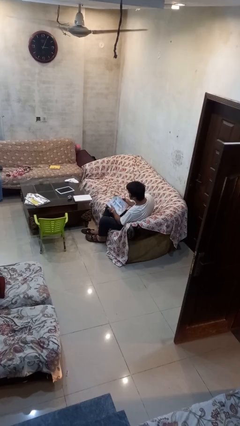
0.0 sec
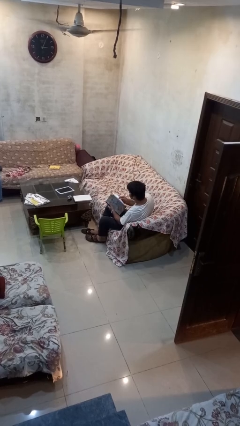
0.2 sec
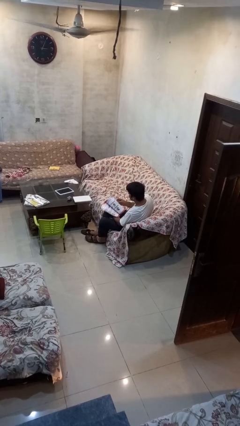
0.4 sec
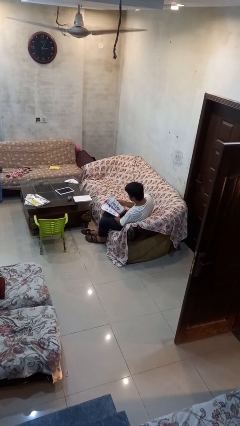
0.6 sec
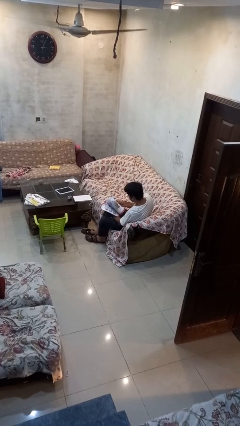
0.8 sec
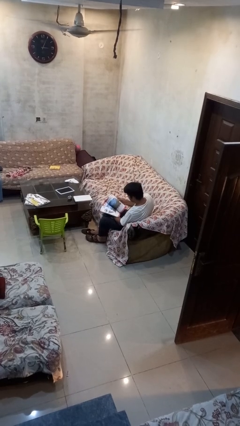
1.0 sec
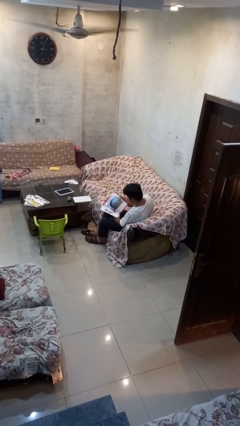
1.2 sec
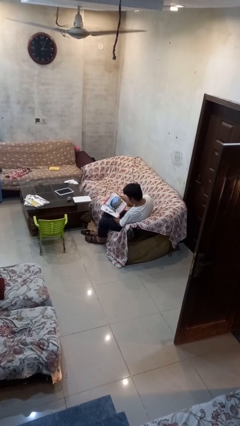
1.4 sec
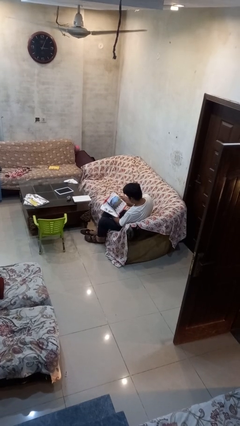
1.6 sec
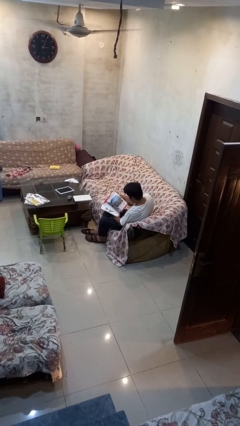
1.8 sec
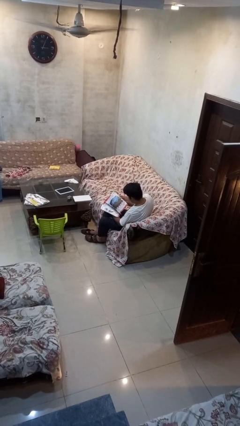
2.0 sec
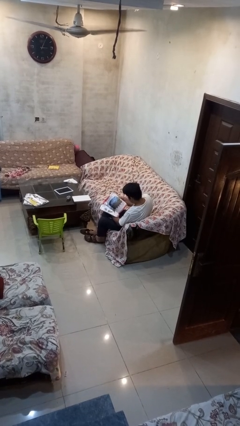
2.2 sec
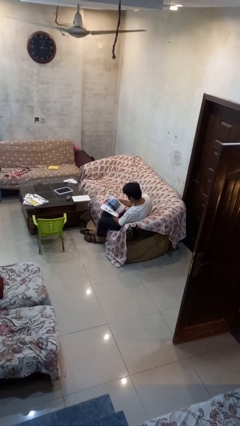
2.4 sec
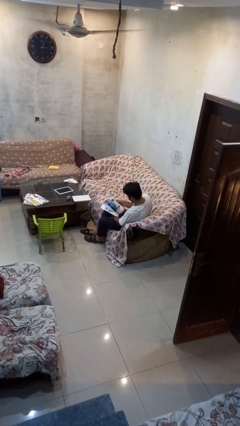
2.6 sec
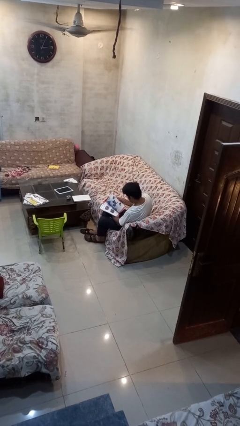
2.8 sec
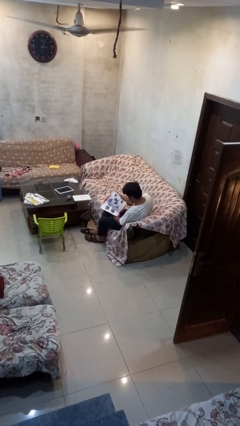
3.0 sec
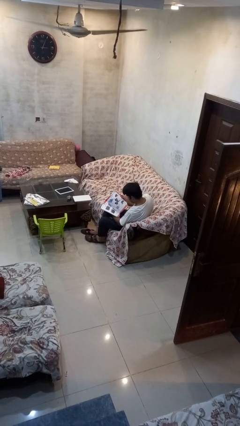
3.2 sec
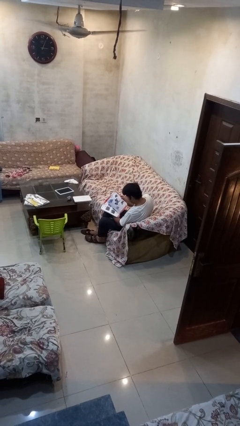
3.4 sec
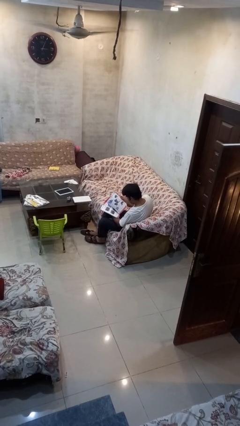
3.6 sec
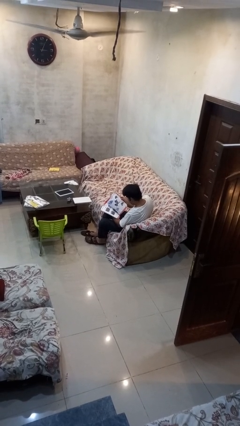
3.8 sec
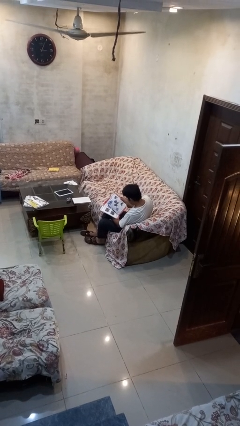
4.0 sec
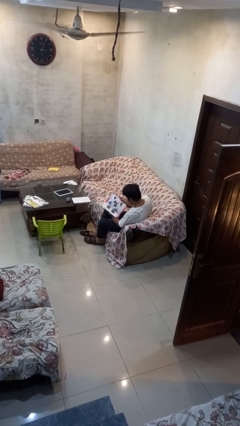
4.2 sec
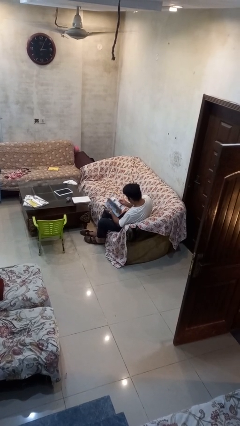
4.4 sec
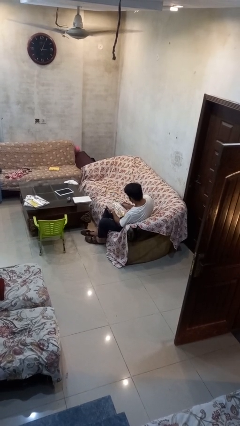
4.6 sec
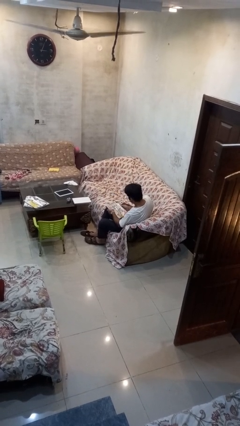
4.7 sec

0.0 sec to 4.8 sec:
person reads book

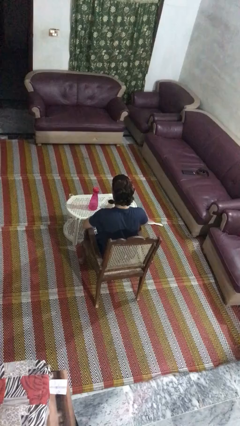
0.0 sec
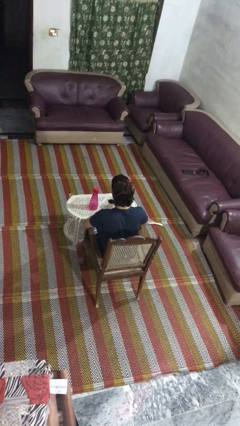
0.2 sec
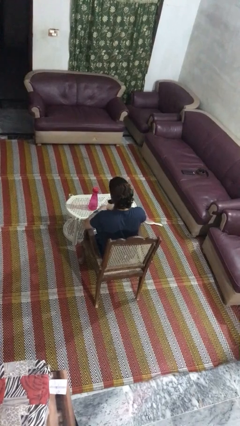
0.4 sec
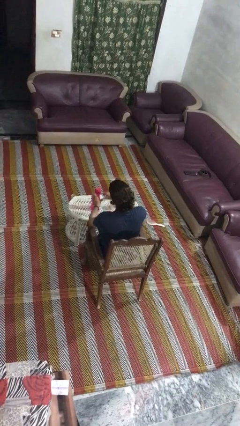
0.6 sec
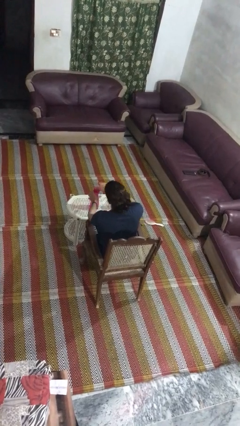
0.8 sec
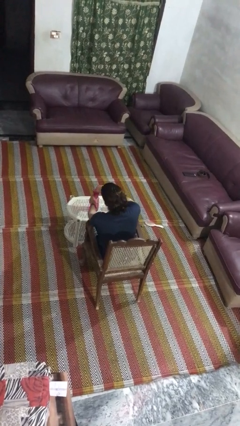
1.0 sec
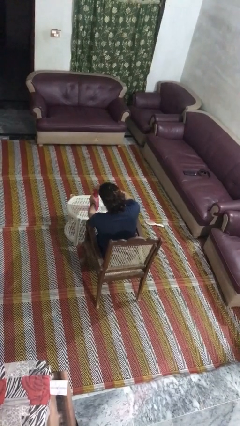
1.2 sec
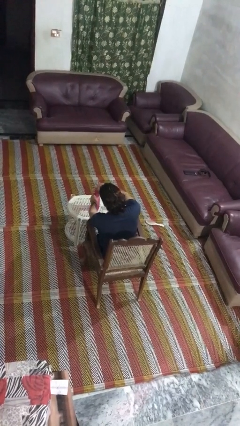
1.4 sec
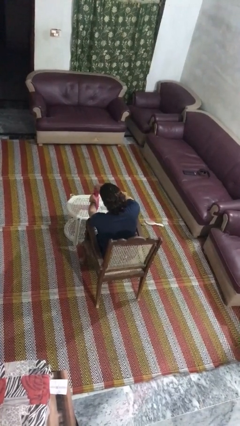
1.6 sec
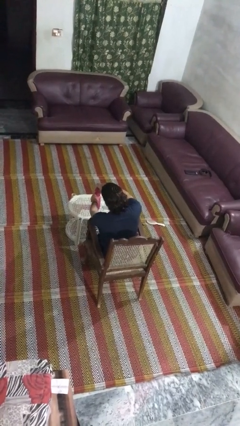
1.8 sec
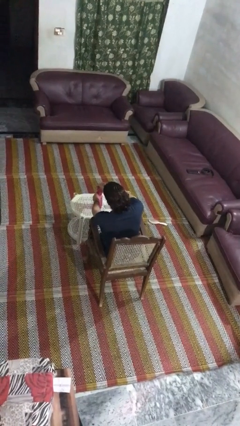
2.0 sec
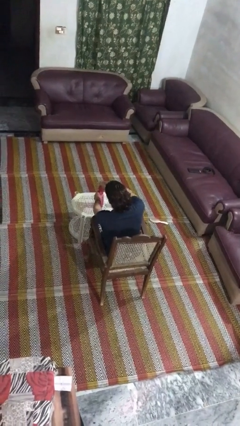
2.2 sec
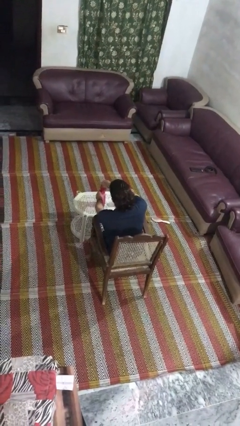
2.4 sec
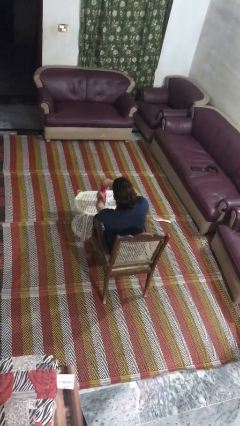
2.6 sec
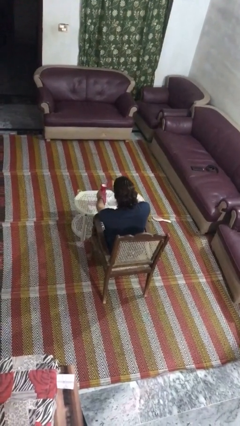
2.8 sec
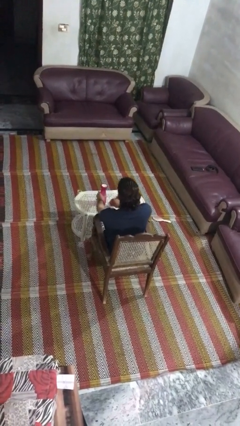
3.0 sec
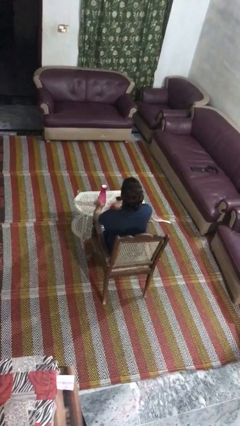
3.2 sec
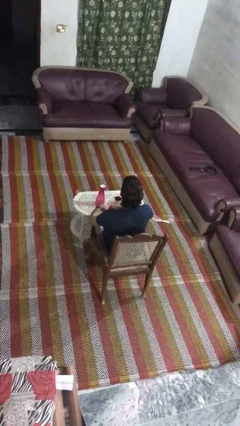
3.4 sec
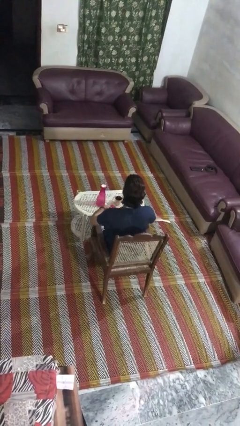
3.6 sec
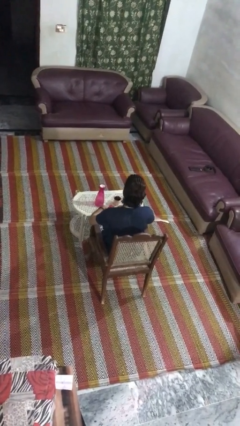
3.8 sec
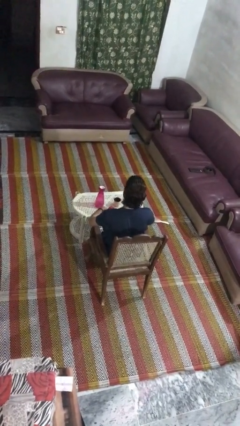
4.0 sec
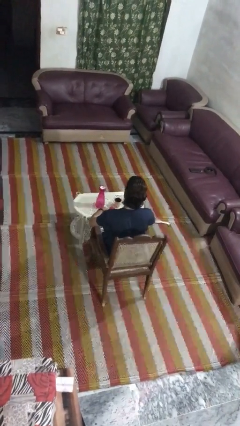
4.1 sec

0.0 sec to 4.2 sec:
person unscrews lid from bottle

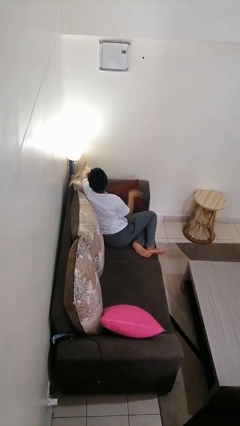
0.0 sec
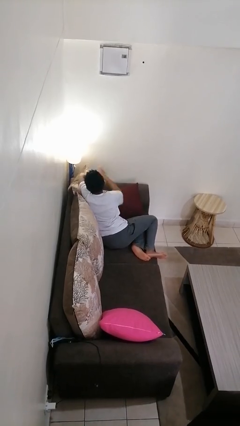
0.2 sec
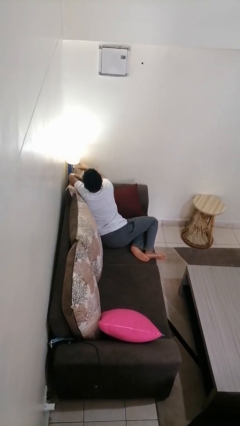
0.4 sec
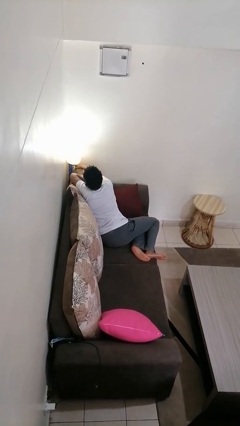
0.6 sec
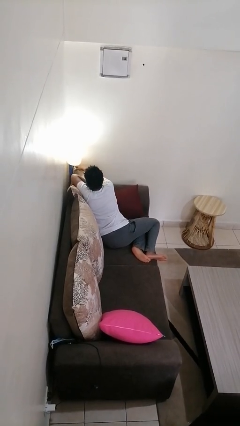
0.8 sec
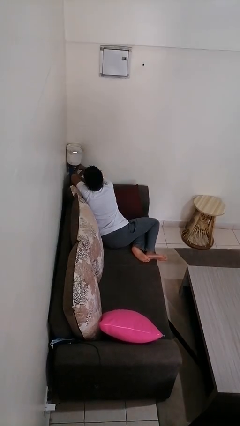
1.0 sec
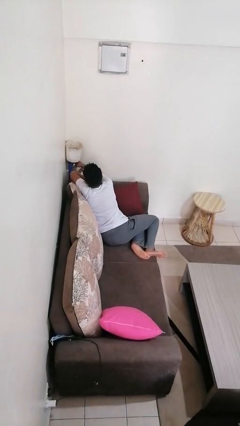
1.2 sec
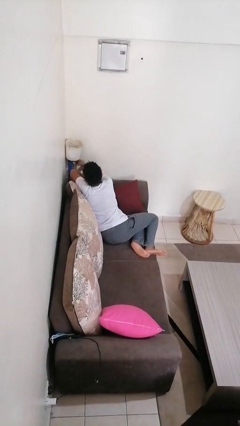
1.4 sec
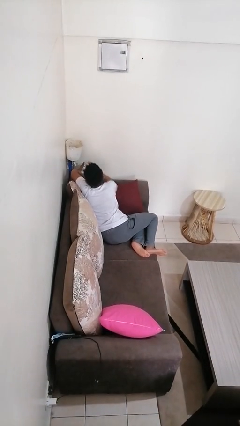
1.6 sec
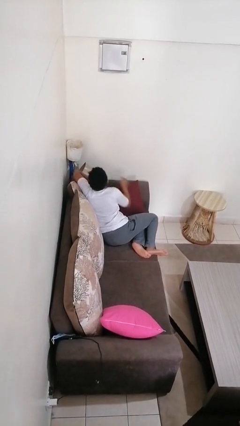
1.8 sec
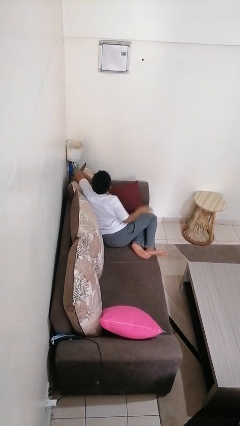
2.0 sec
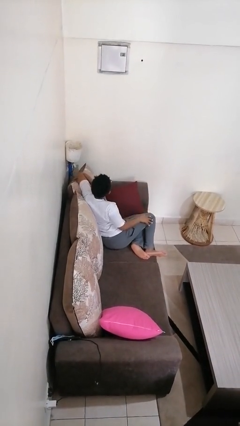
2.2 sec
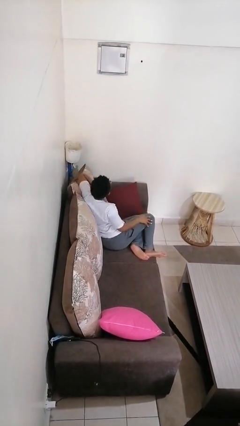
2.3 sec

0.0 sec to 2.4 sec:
person turns off lamp

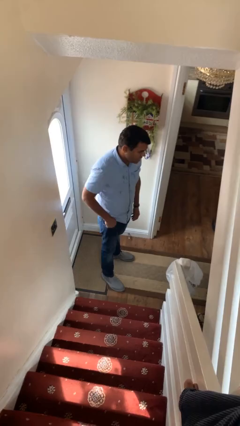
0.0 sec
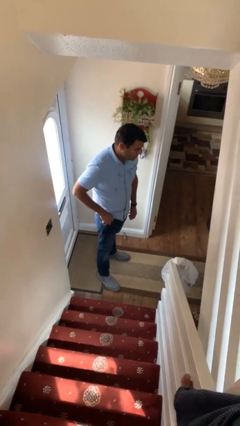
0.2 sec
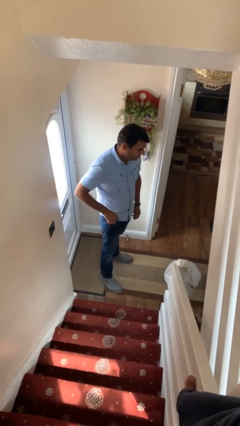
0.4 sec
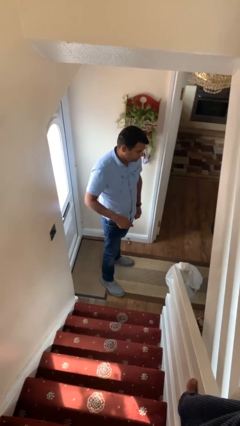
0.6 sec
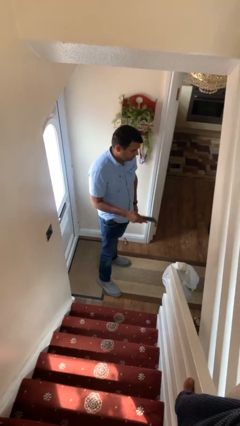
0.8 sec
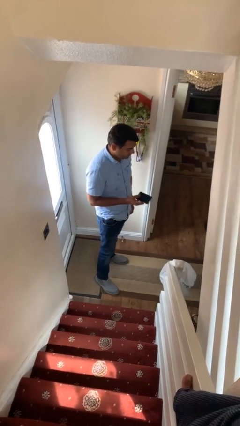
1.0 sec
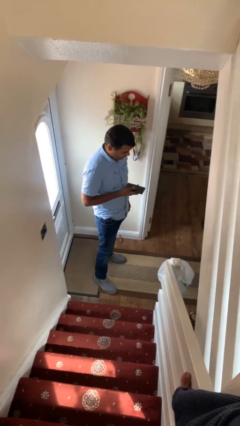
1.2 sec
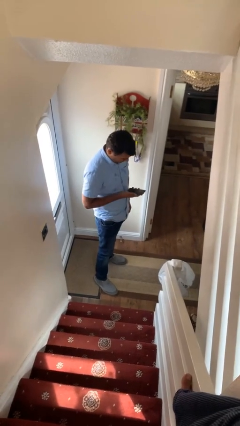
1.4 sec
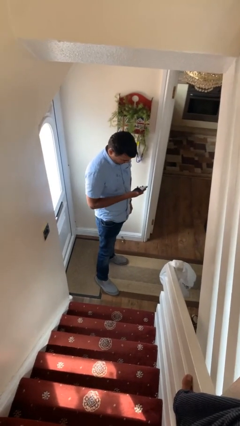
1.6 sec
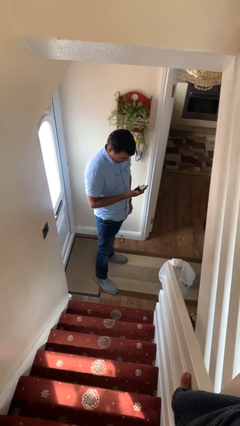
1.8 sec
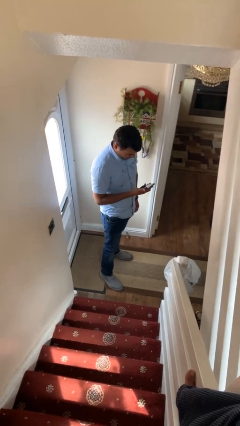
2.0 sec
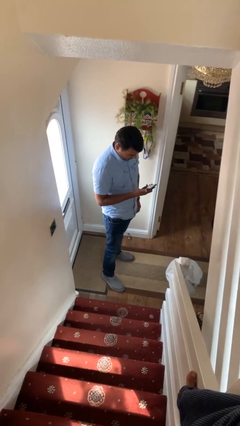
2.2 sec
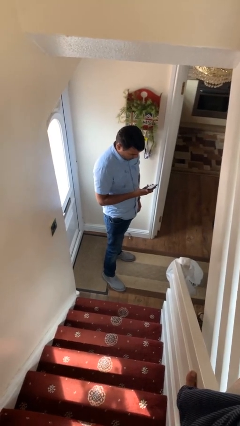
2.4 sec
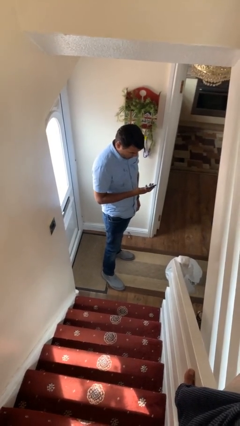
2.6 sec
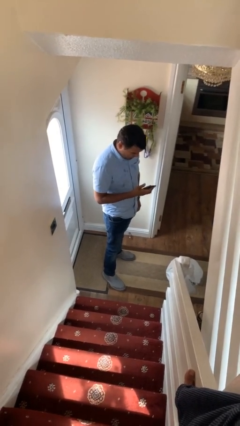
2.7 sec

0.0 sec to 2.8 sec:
person takes phone from pocket

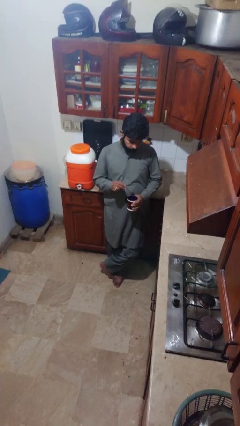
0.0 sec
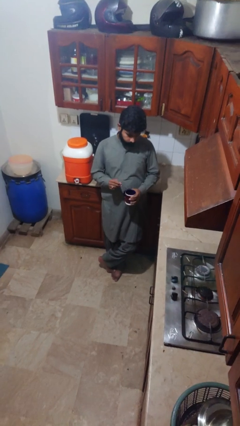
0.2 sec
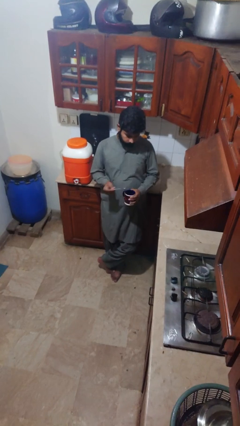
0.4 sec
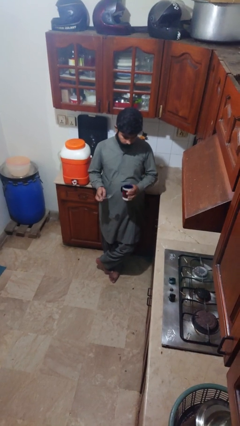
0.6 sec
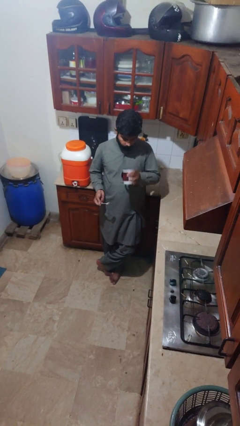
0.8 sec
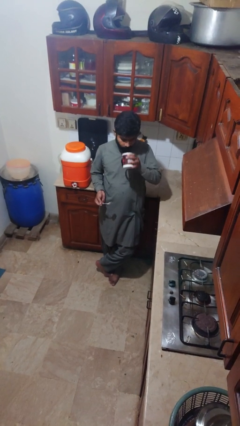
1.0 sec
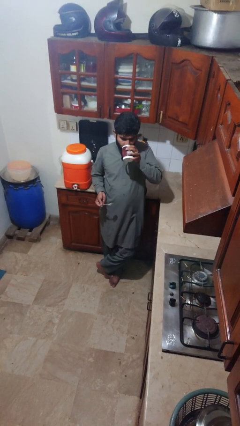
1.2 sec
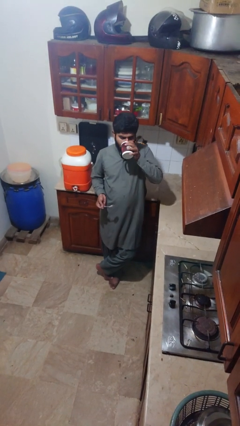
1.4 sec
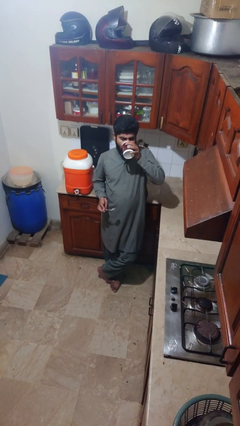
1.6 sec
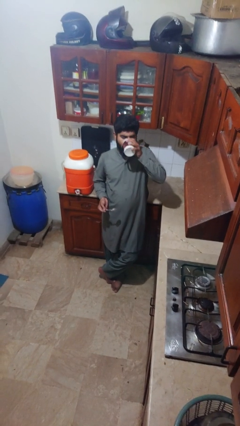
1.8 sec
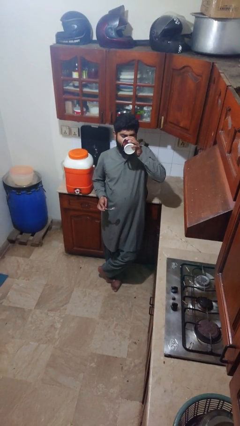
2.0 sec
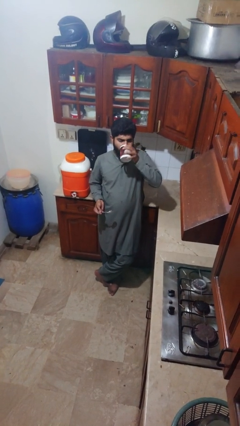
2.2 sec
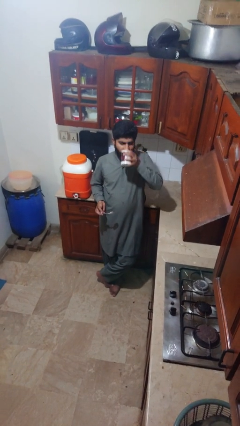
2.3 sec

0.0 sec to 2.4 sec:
person drinks from mug

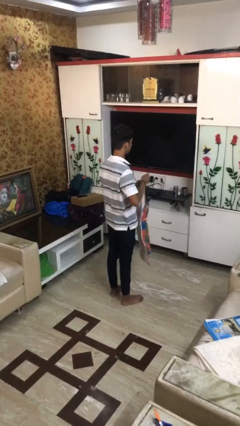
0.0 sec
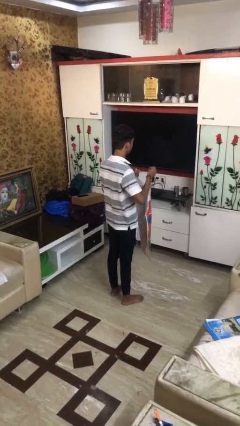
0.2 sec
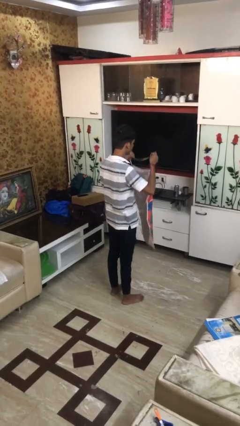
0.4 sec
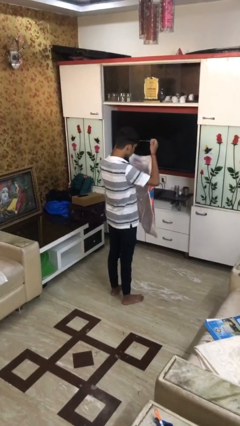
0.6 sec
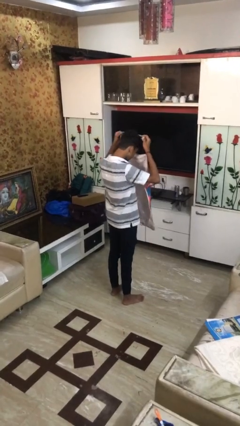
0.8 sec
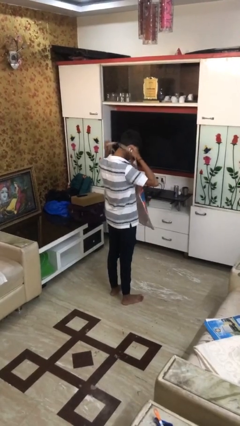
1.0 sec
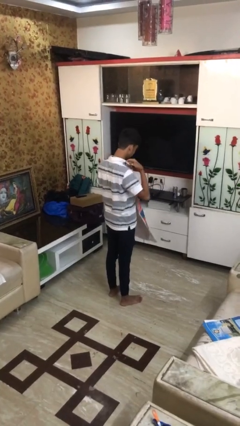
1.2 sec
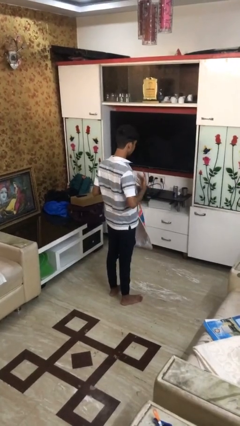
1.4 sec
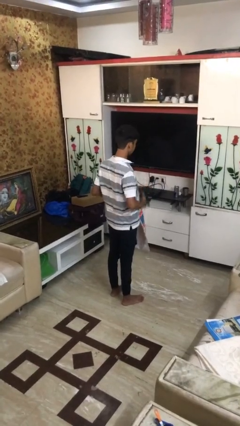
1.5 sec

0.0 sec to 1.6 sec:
person puts on apron
